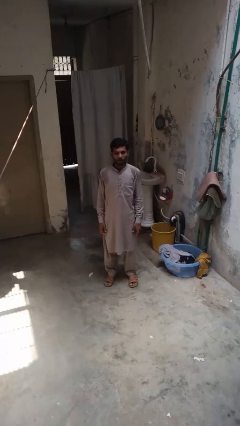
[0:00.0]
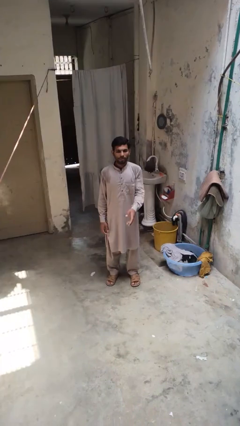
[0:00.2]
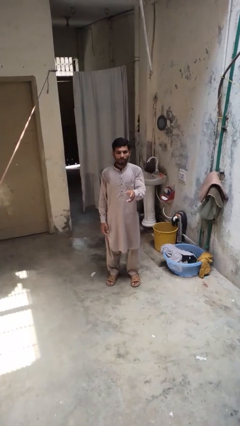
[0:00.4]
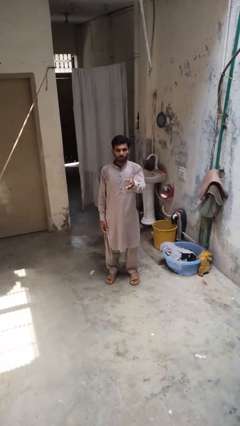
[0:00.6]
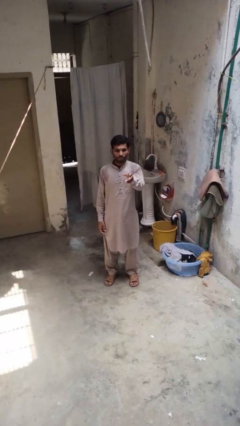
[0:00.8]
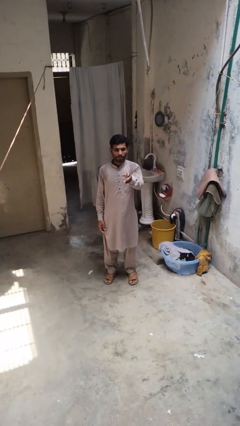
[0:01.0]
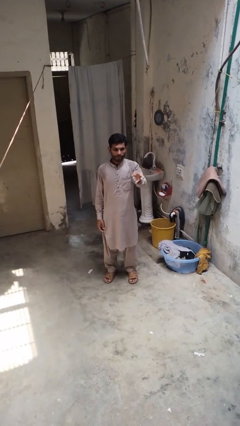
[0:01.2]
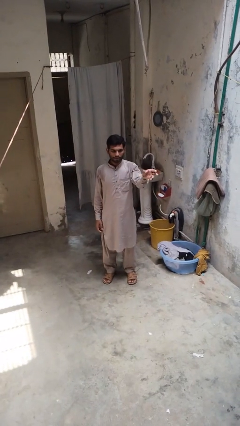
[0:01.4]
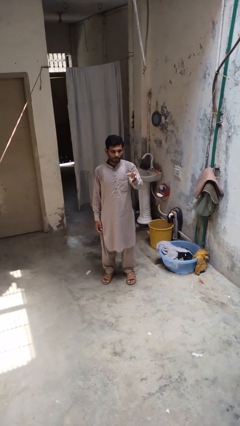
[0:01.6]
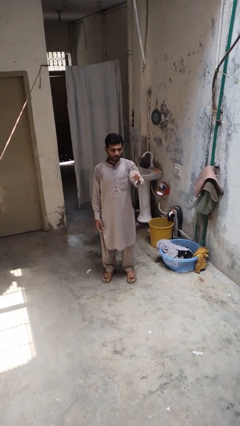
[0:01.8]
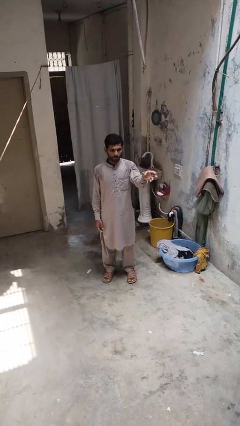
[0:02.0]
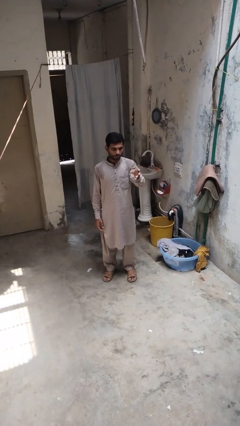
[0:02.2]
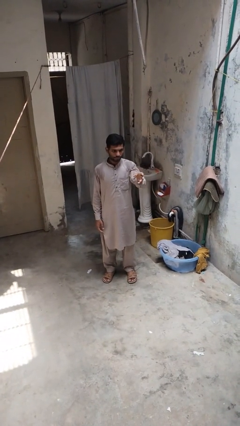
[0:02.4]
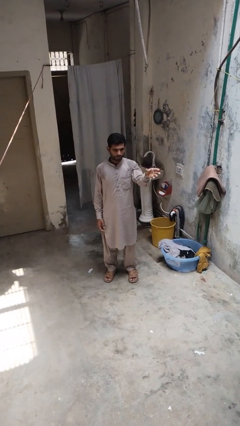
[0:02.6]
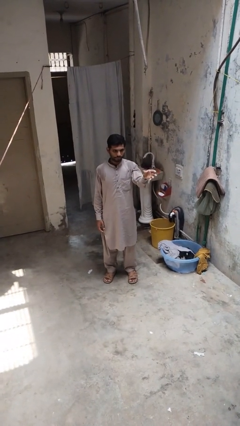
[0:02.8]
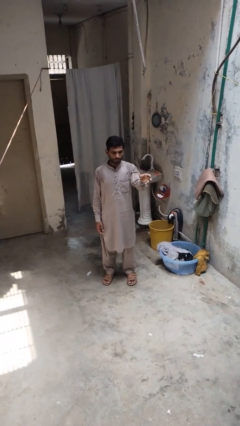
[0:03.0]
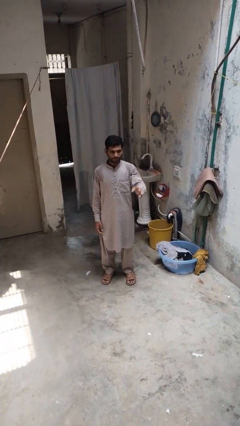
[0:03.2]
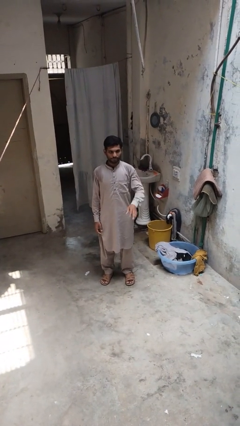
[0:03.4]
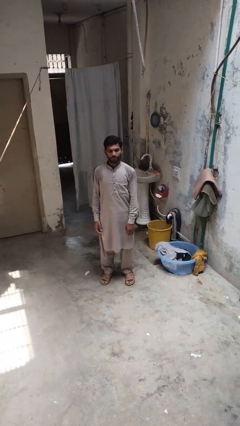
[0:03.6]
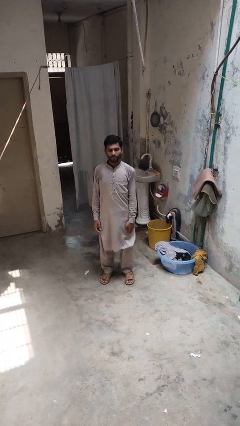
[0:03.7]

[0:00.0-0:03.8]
person gestures swipe left

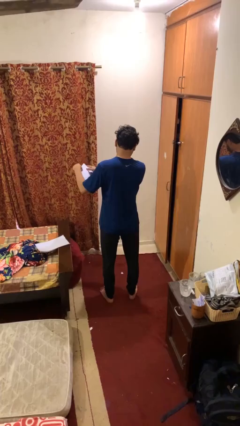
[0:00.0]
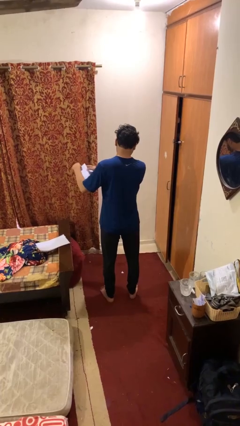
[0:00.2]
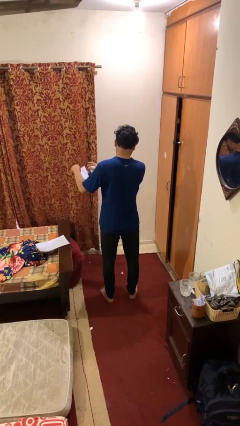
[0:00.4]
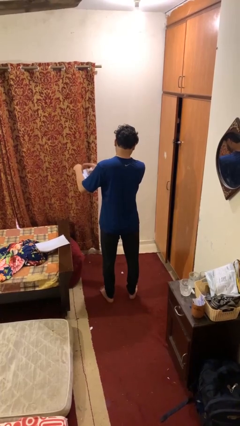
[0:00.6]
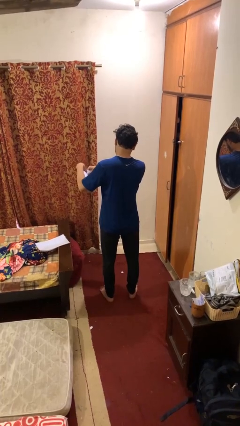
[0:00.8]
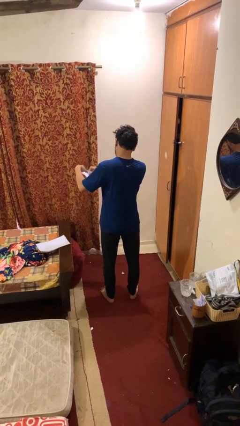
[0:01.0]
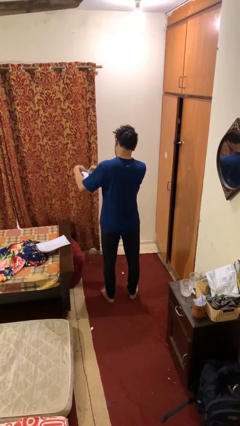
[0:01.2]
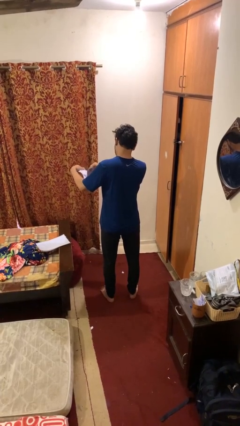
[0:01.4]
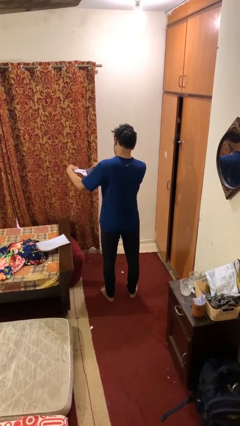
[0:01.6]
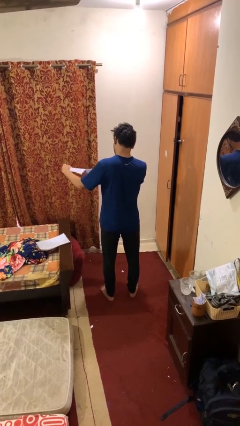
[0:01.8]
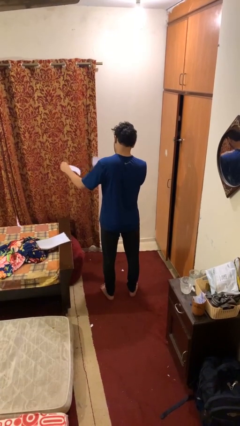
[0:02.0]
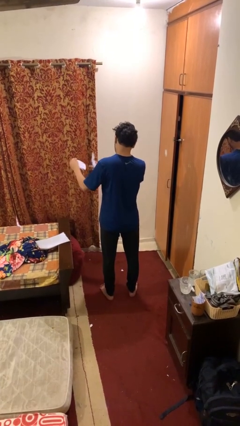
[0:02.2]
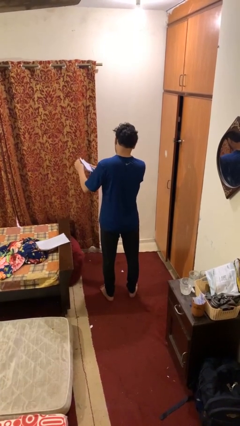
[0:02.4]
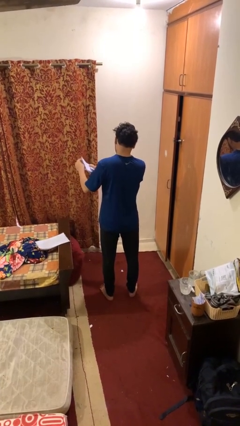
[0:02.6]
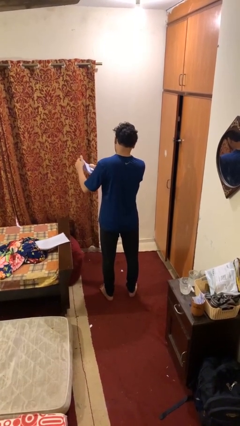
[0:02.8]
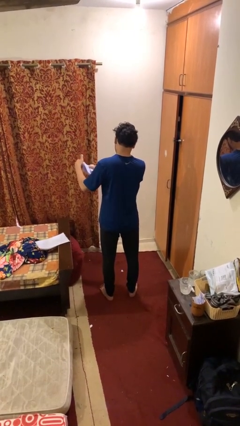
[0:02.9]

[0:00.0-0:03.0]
person tears paper

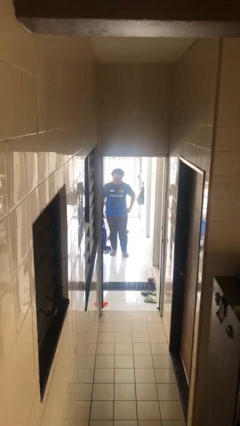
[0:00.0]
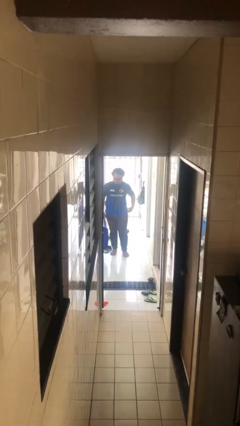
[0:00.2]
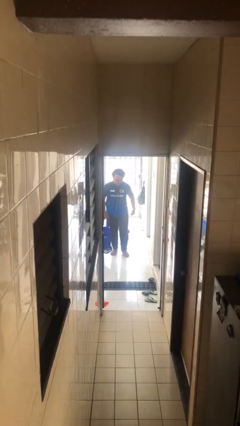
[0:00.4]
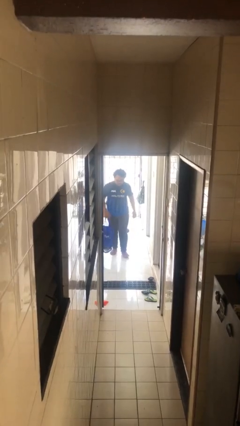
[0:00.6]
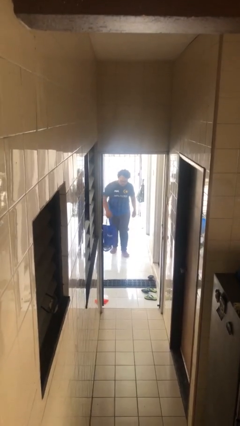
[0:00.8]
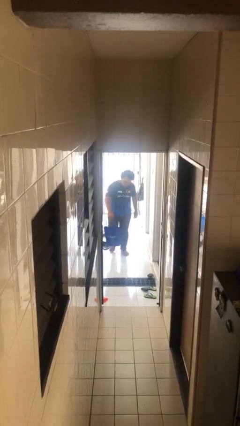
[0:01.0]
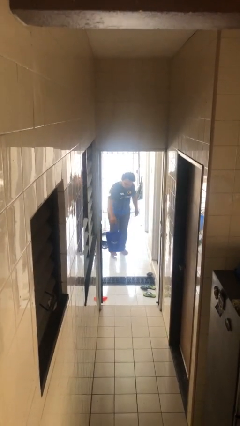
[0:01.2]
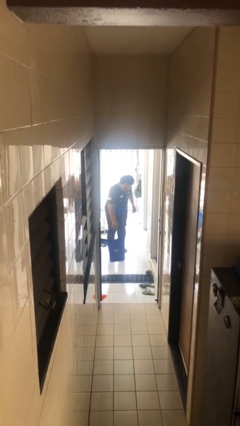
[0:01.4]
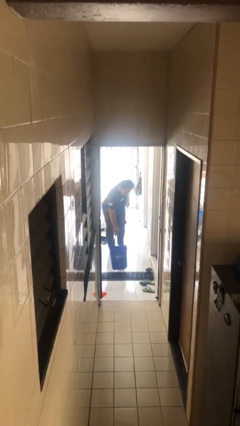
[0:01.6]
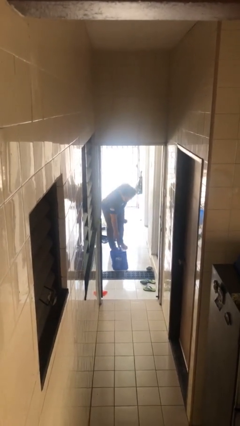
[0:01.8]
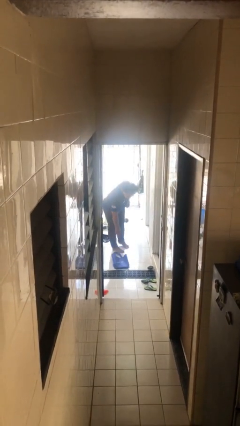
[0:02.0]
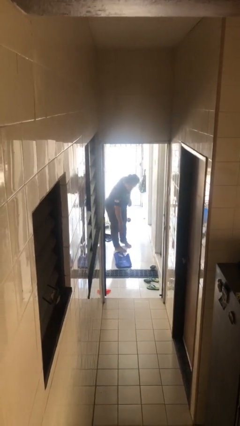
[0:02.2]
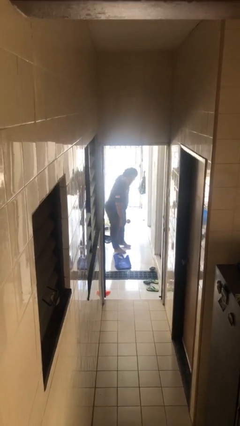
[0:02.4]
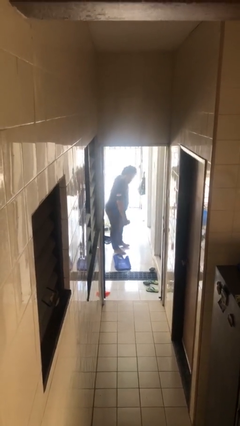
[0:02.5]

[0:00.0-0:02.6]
person puts down object on floor

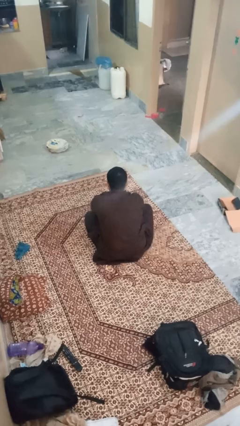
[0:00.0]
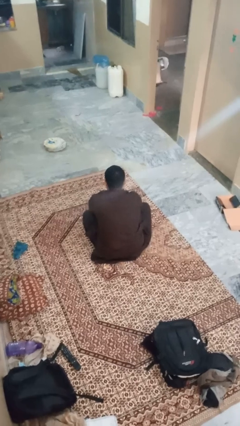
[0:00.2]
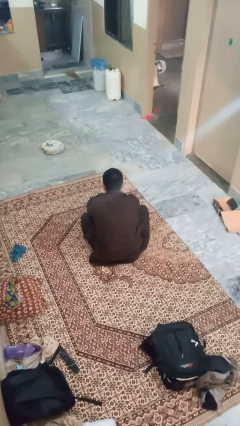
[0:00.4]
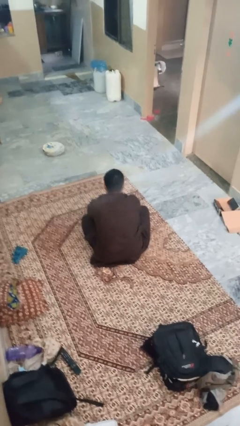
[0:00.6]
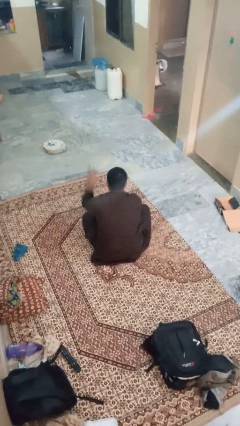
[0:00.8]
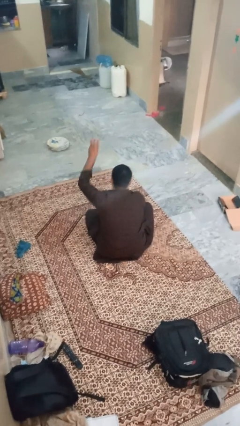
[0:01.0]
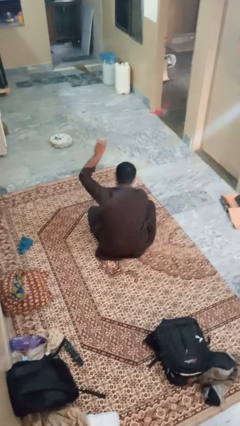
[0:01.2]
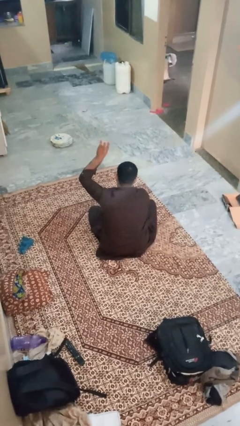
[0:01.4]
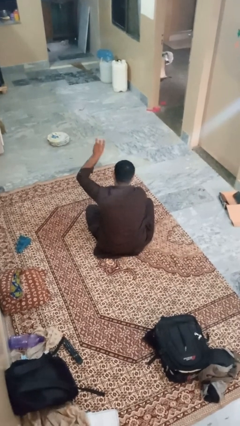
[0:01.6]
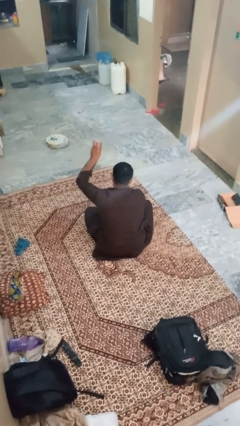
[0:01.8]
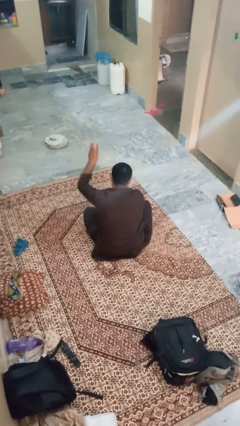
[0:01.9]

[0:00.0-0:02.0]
person gestures number three

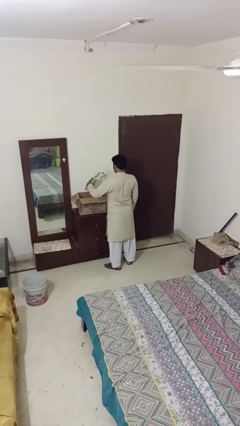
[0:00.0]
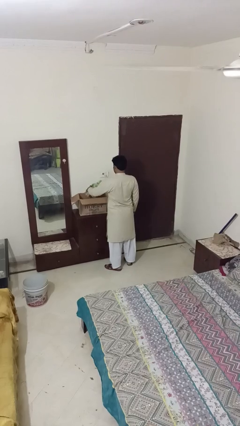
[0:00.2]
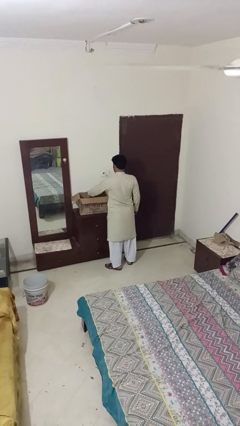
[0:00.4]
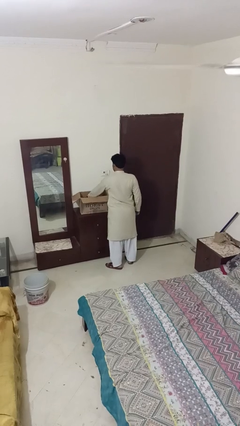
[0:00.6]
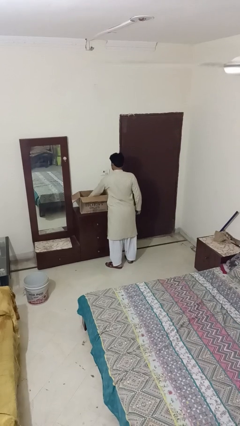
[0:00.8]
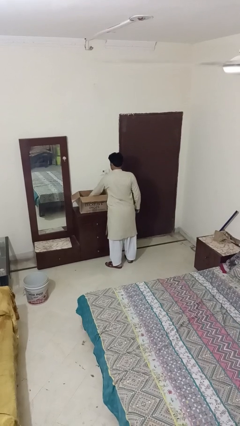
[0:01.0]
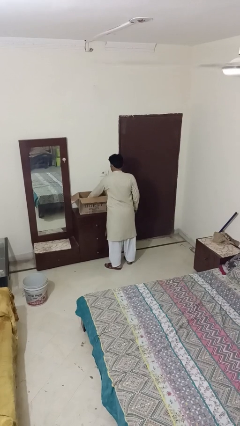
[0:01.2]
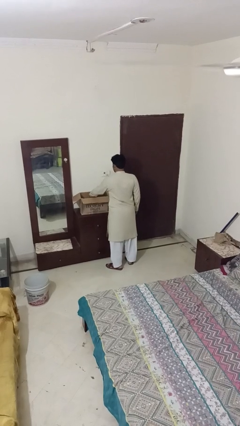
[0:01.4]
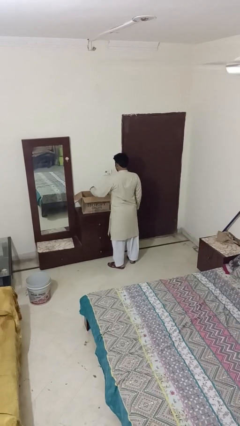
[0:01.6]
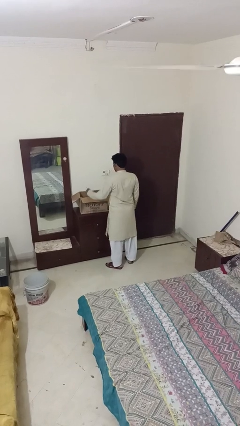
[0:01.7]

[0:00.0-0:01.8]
person puts object into box

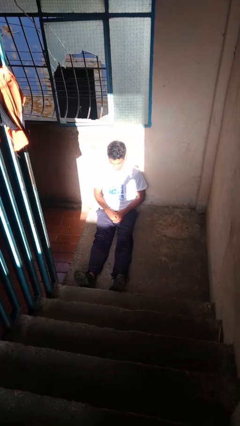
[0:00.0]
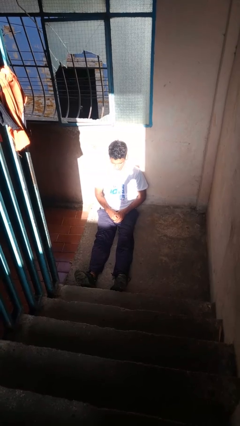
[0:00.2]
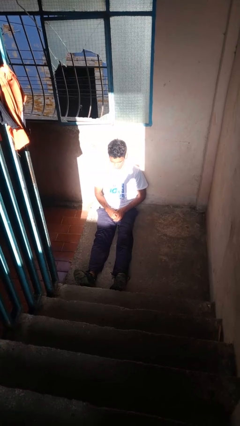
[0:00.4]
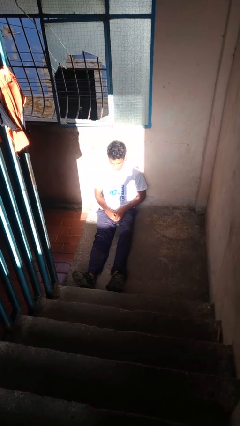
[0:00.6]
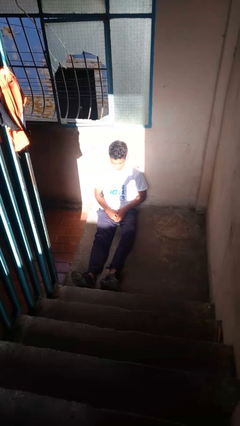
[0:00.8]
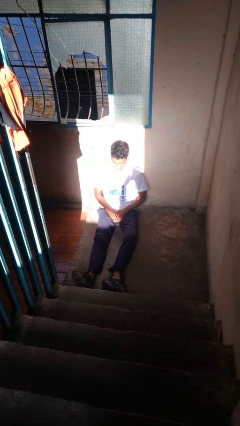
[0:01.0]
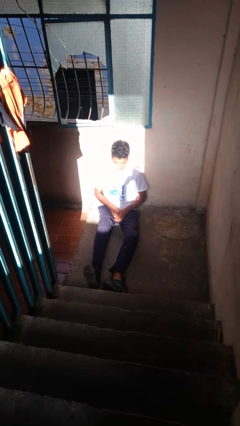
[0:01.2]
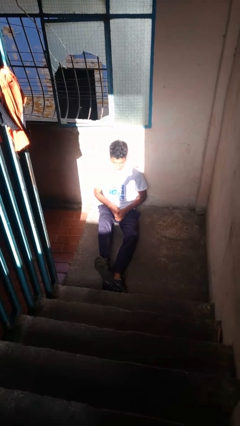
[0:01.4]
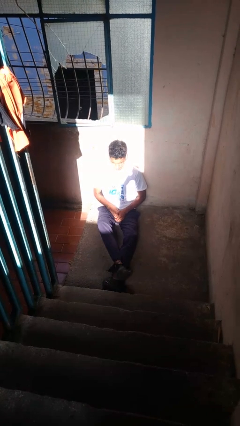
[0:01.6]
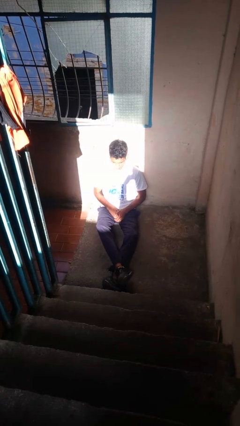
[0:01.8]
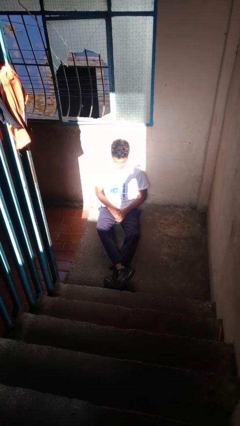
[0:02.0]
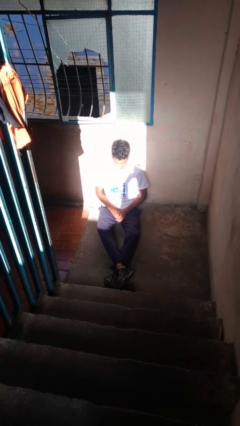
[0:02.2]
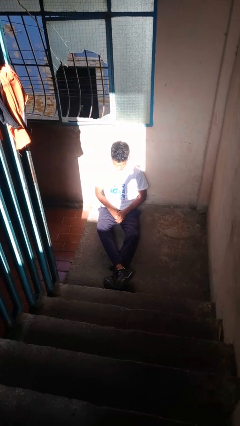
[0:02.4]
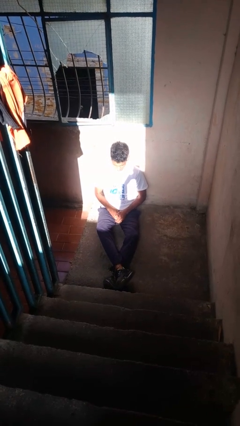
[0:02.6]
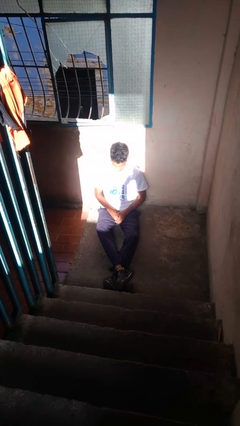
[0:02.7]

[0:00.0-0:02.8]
person crosses legs

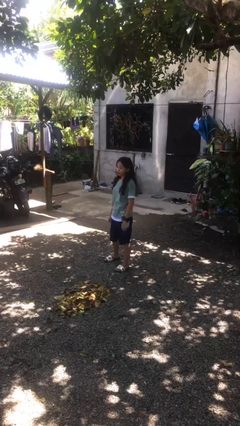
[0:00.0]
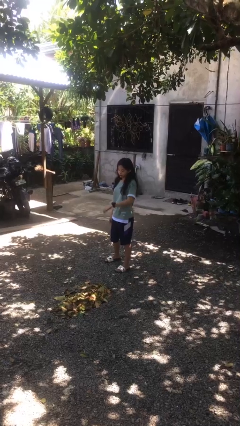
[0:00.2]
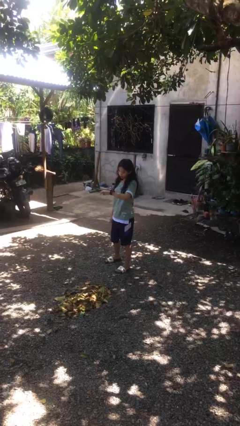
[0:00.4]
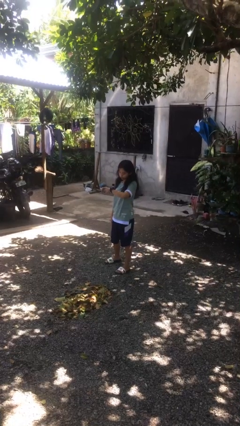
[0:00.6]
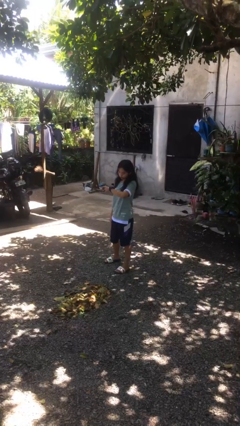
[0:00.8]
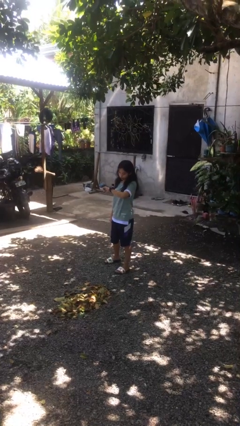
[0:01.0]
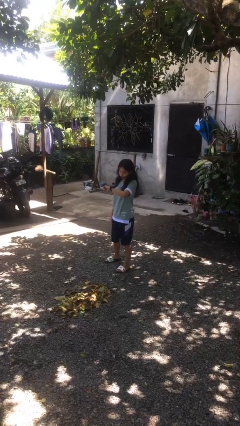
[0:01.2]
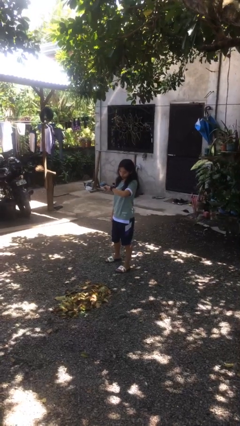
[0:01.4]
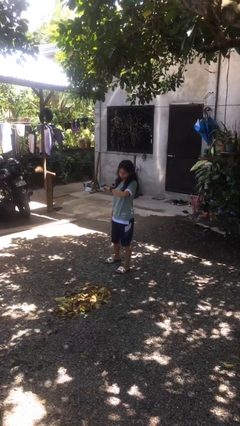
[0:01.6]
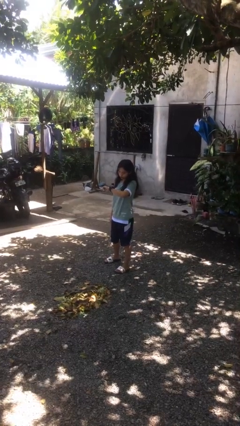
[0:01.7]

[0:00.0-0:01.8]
person looks at wristwatch
